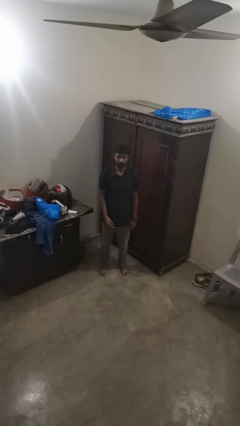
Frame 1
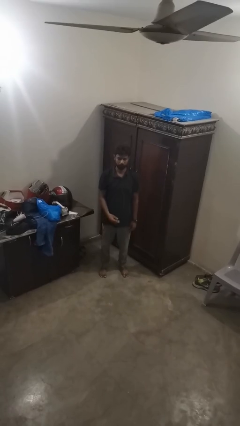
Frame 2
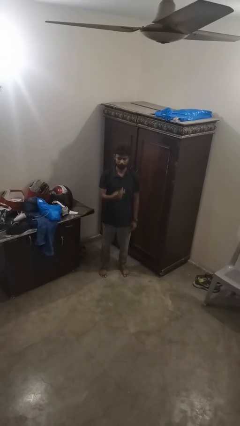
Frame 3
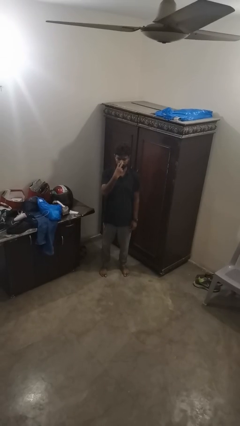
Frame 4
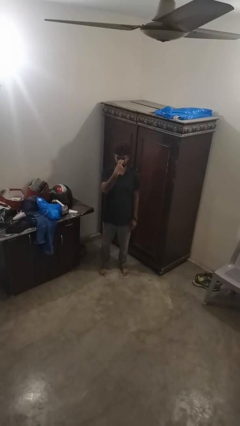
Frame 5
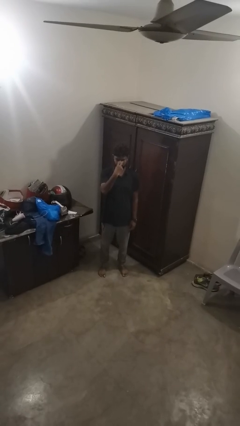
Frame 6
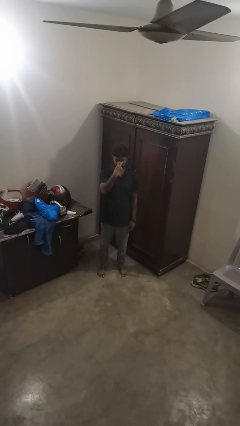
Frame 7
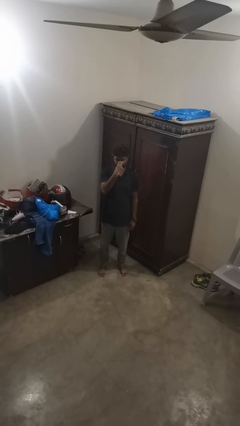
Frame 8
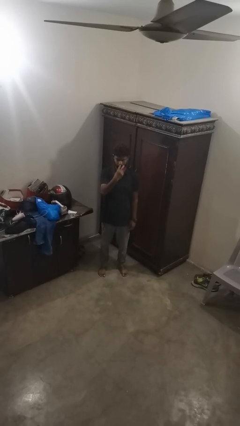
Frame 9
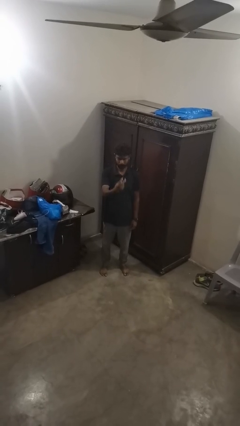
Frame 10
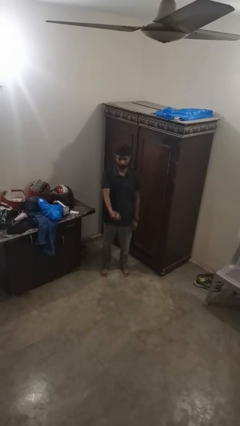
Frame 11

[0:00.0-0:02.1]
person gestures watch closely

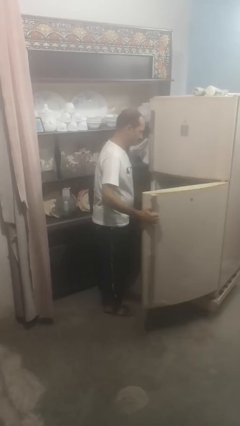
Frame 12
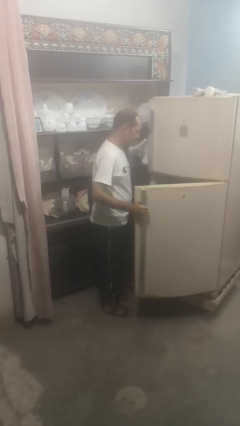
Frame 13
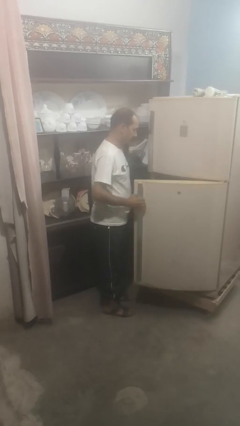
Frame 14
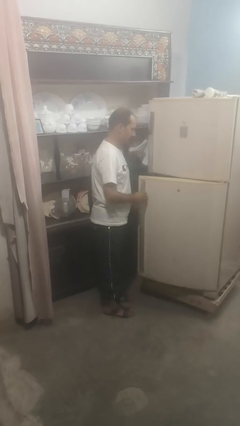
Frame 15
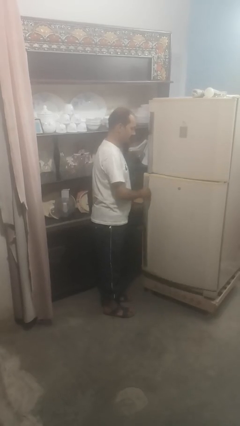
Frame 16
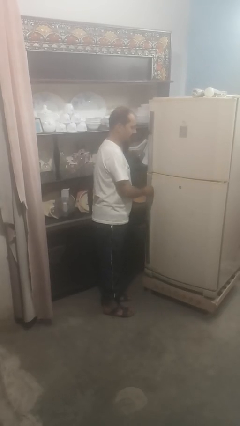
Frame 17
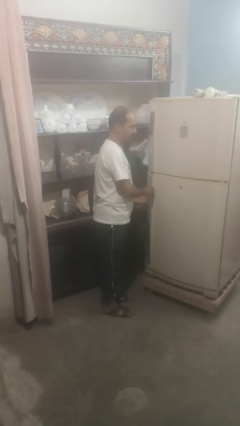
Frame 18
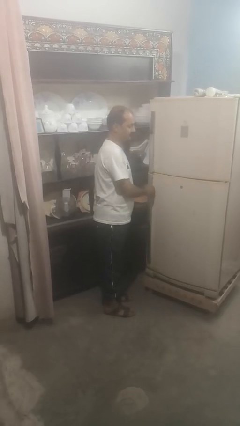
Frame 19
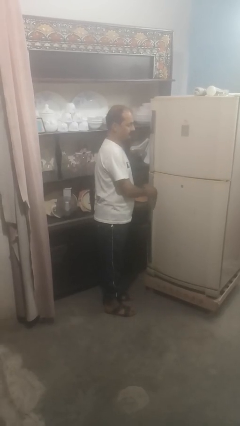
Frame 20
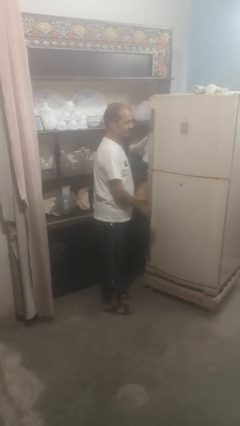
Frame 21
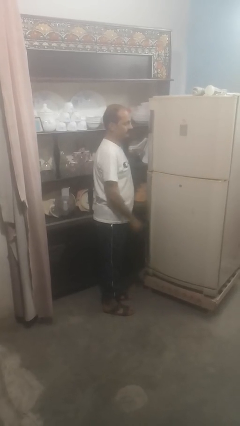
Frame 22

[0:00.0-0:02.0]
person closes refrigerator

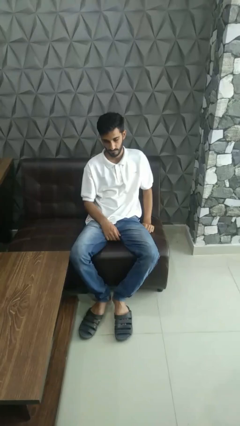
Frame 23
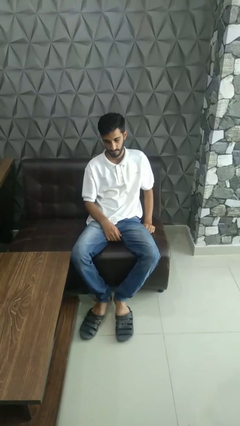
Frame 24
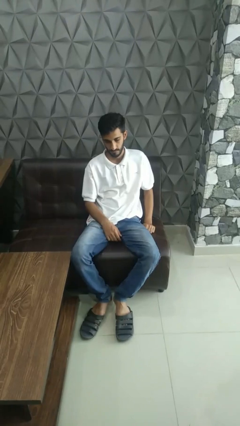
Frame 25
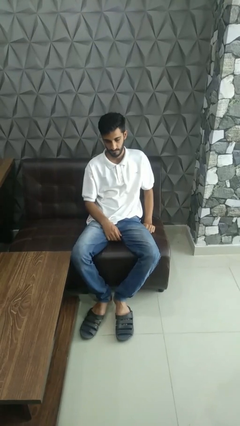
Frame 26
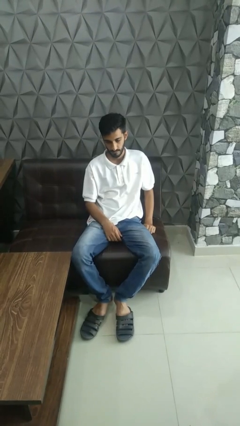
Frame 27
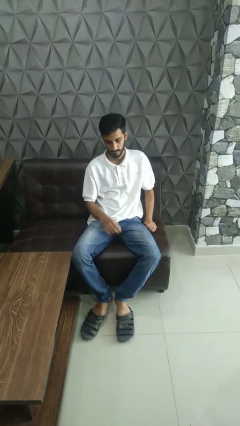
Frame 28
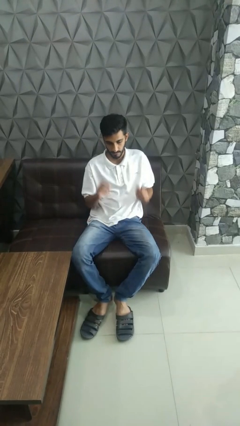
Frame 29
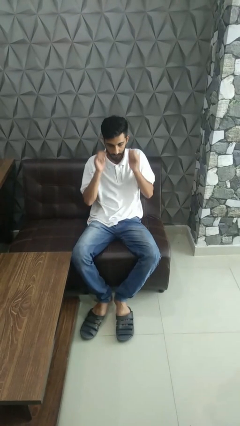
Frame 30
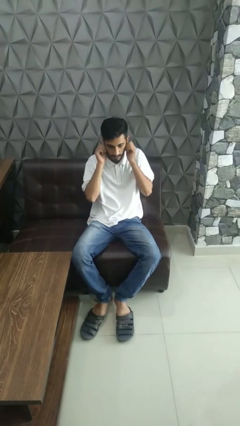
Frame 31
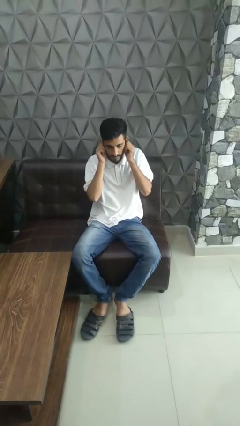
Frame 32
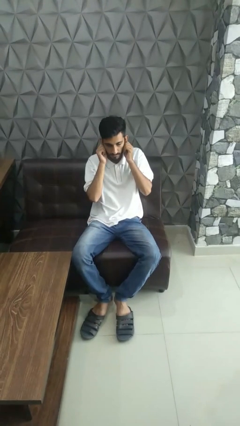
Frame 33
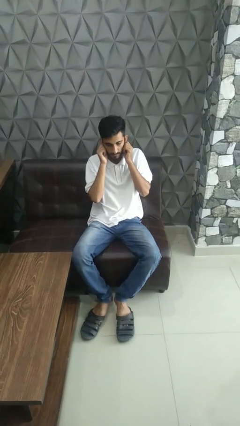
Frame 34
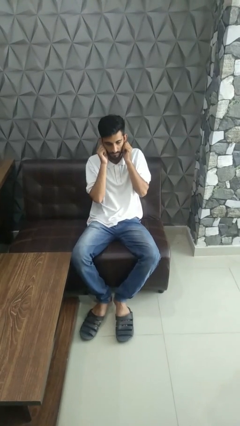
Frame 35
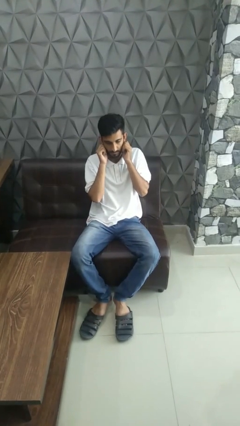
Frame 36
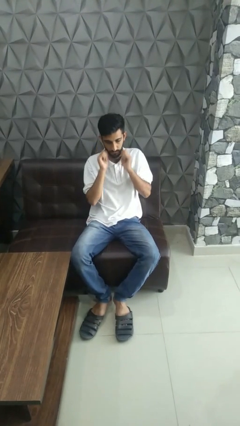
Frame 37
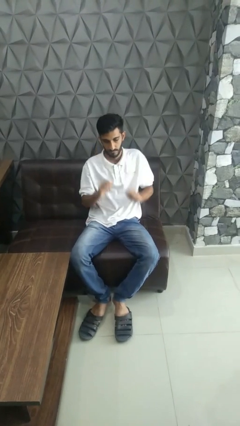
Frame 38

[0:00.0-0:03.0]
person touches earlobe

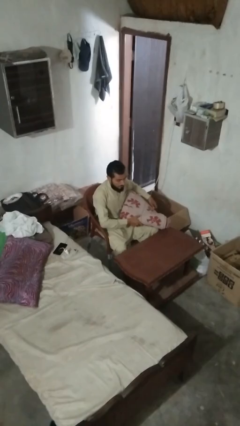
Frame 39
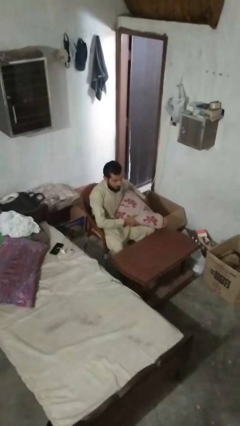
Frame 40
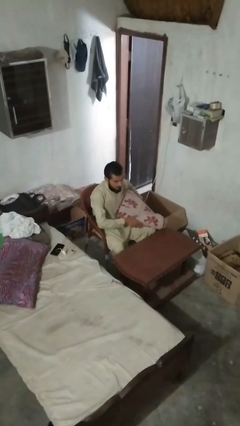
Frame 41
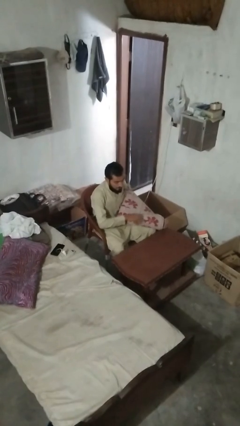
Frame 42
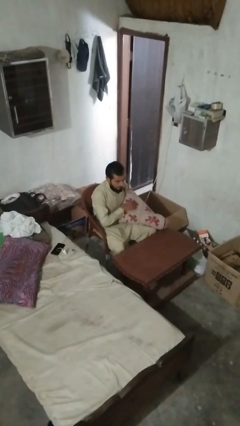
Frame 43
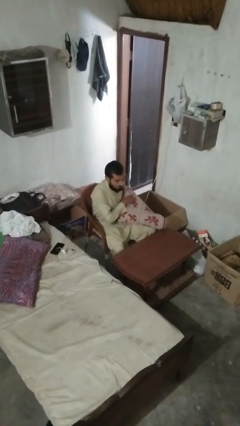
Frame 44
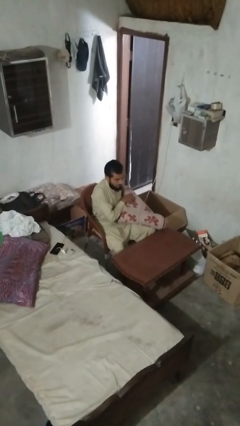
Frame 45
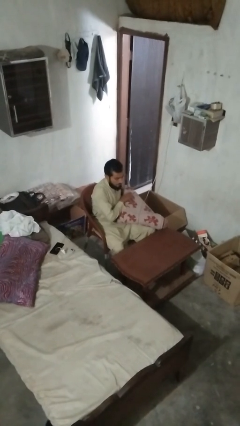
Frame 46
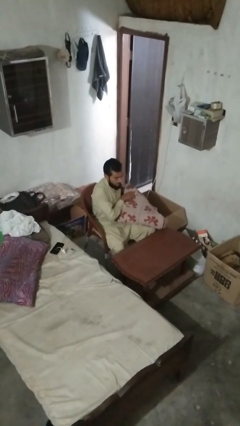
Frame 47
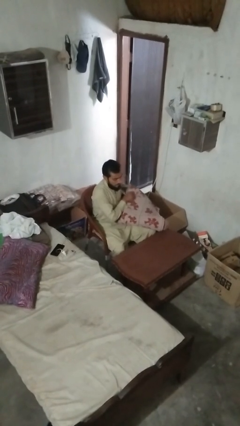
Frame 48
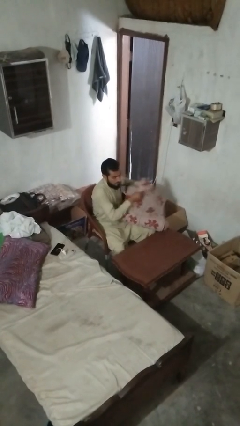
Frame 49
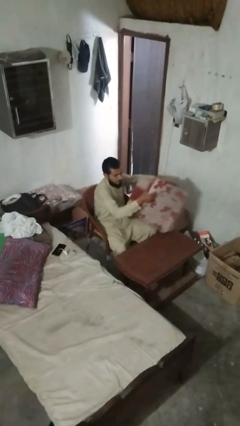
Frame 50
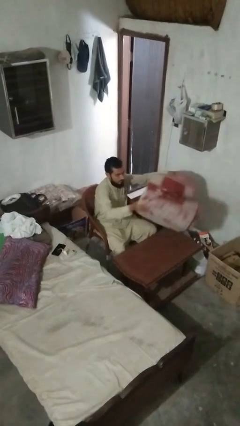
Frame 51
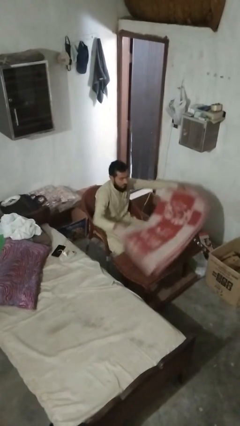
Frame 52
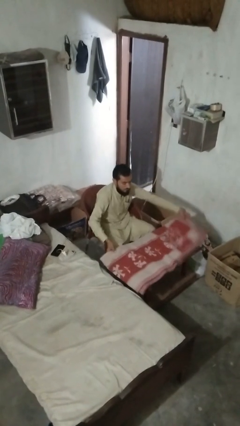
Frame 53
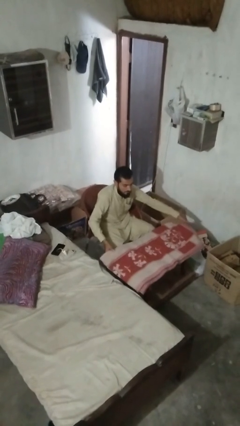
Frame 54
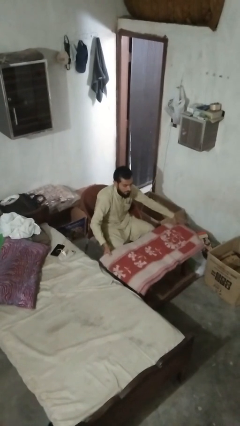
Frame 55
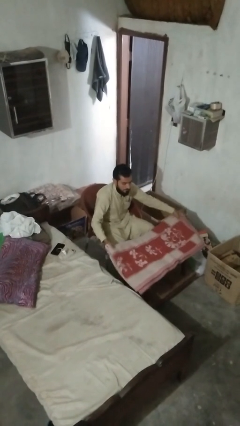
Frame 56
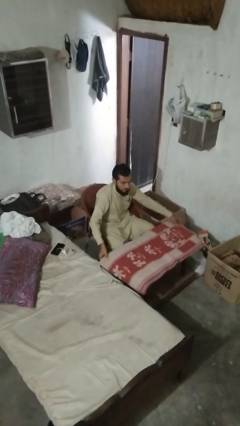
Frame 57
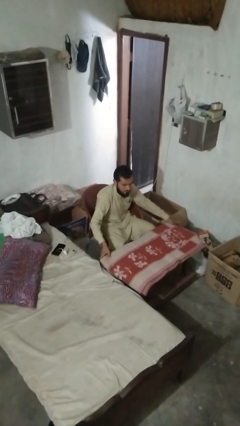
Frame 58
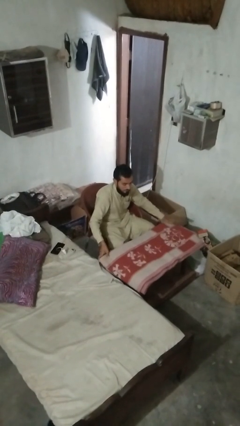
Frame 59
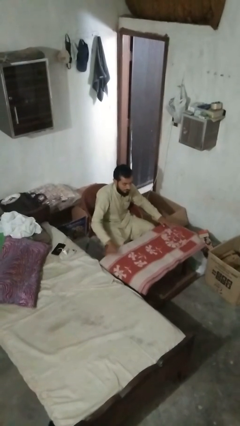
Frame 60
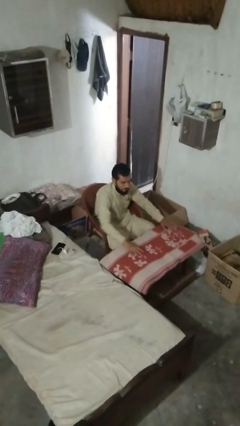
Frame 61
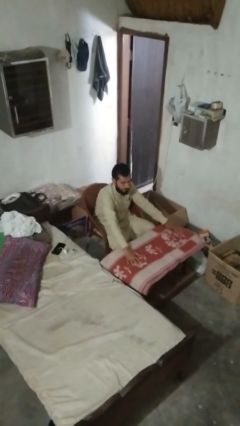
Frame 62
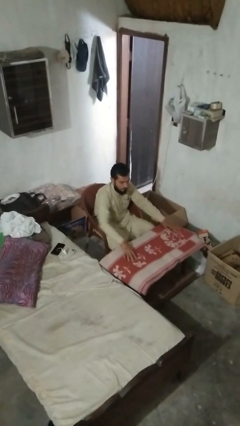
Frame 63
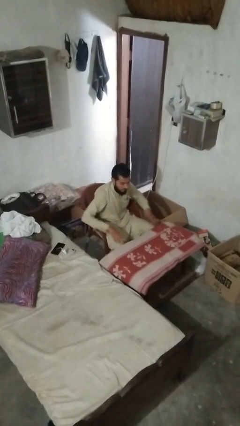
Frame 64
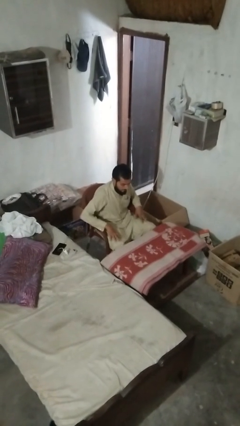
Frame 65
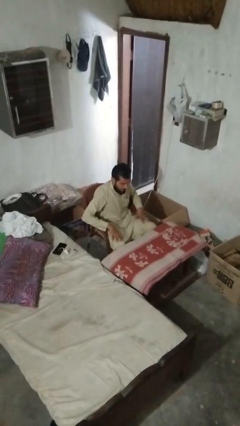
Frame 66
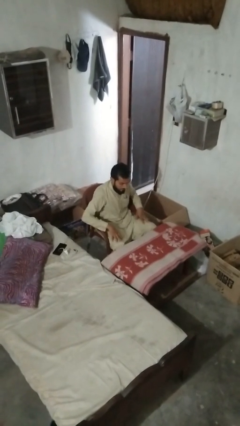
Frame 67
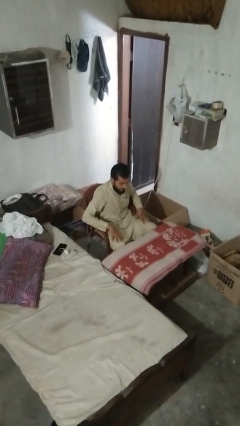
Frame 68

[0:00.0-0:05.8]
person spreads tablecloth

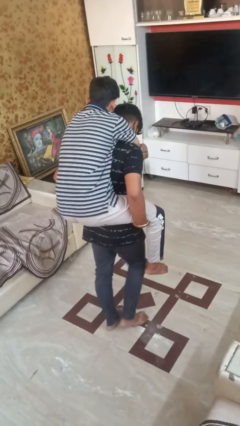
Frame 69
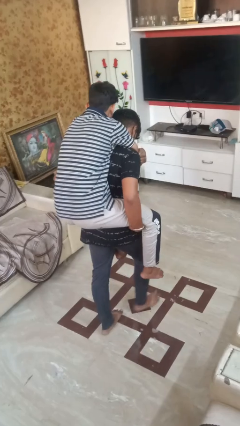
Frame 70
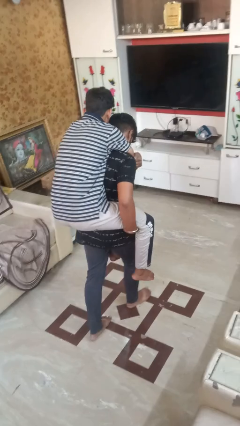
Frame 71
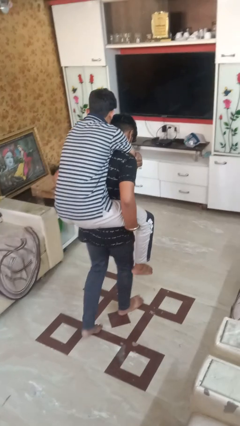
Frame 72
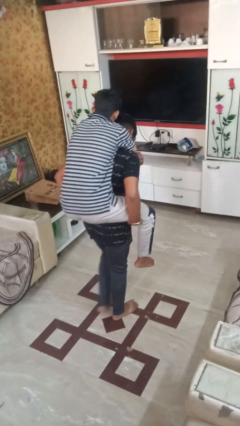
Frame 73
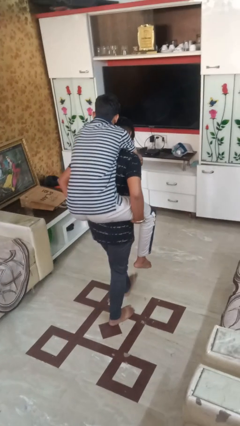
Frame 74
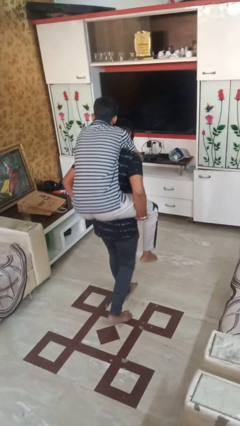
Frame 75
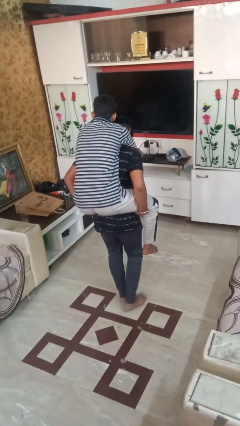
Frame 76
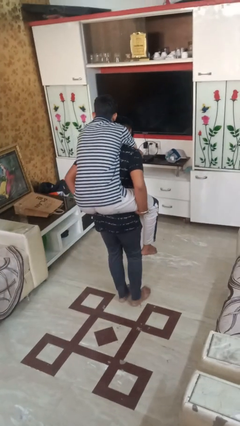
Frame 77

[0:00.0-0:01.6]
person carries person on back

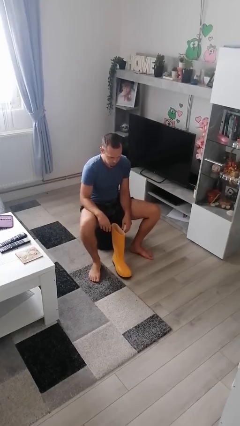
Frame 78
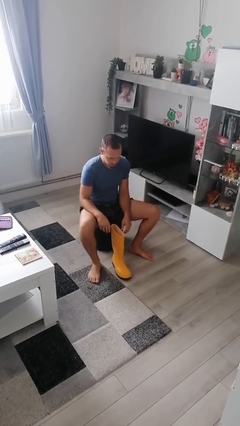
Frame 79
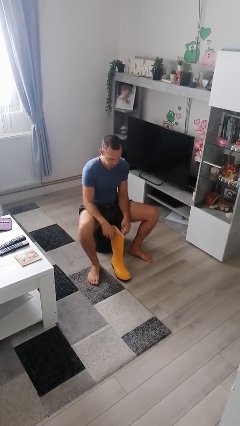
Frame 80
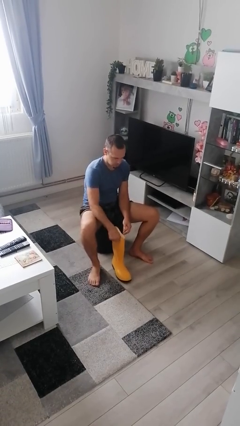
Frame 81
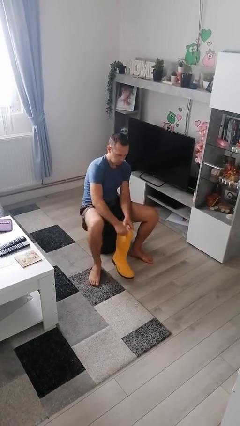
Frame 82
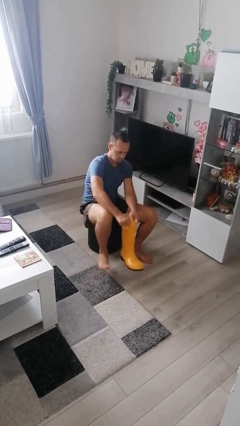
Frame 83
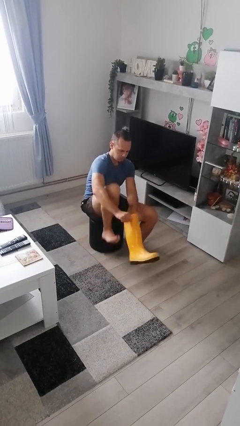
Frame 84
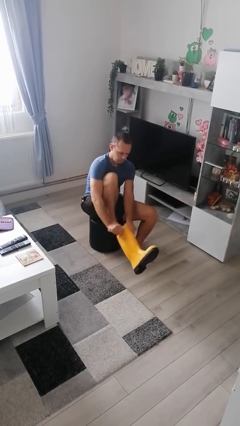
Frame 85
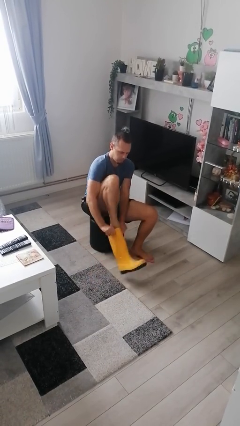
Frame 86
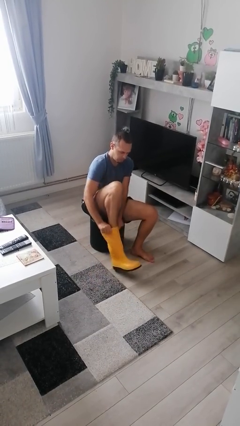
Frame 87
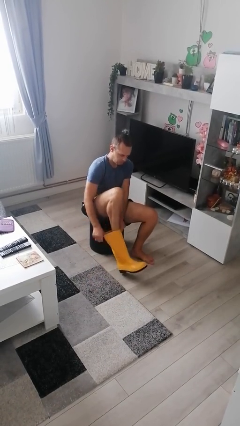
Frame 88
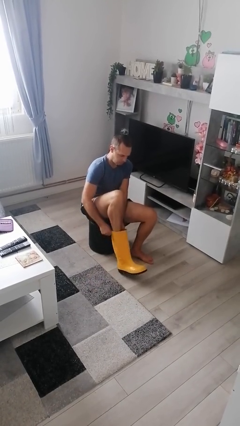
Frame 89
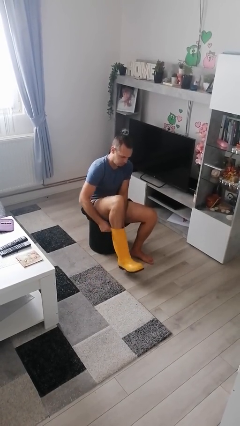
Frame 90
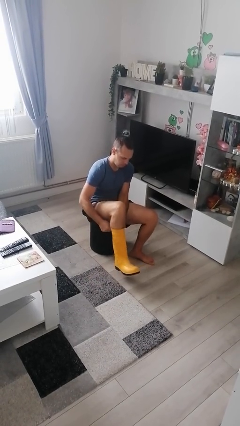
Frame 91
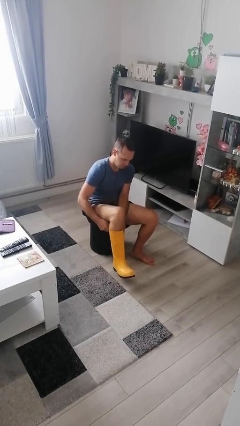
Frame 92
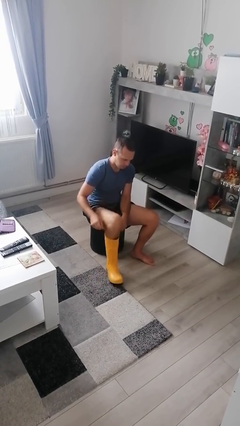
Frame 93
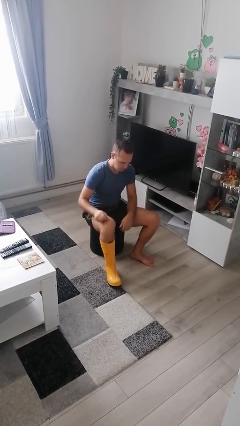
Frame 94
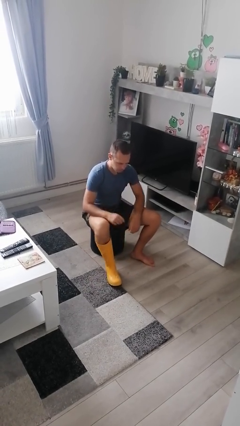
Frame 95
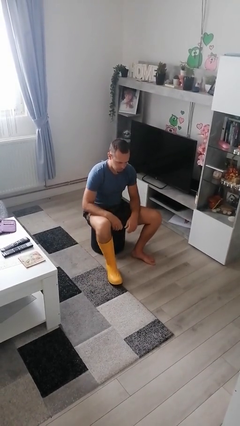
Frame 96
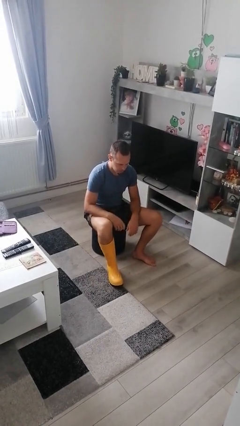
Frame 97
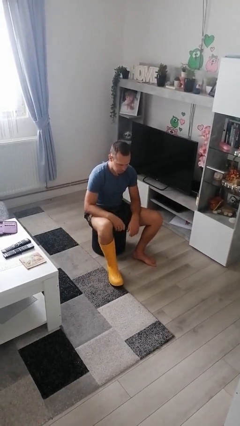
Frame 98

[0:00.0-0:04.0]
person puts on boots
